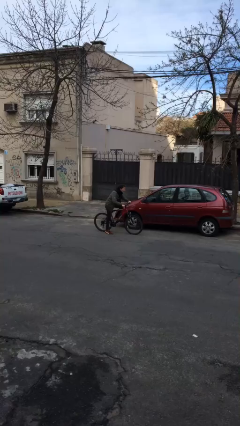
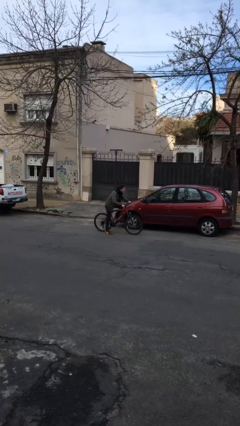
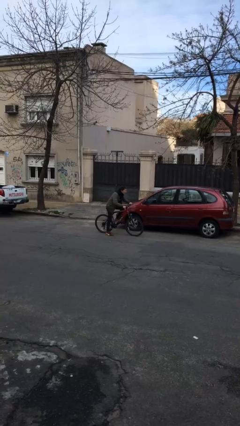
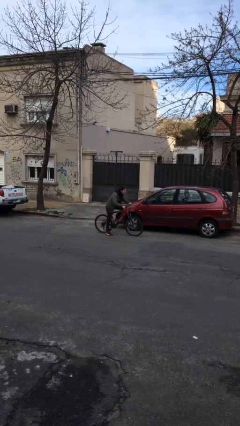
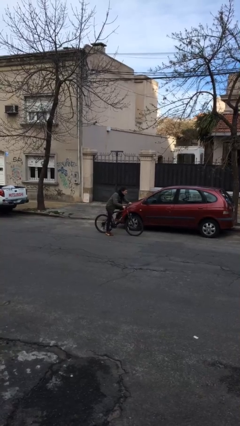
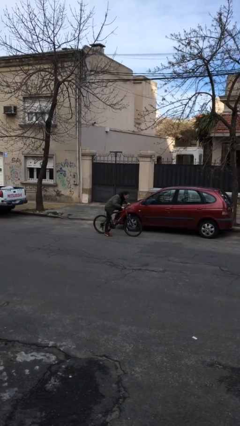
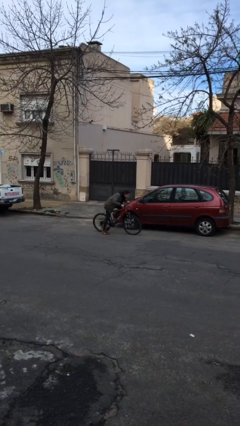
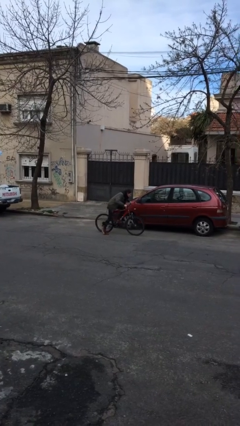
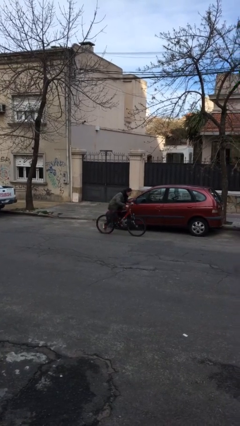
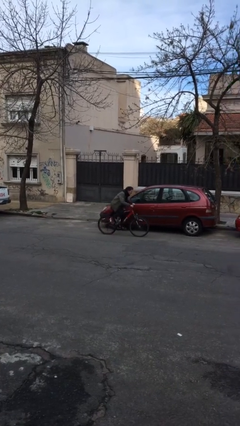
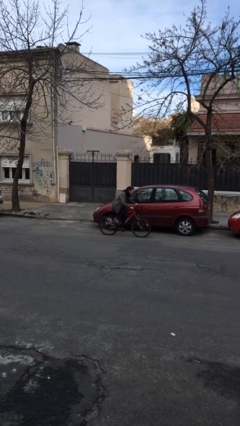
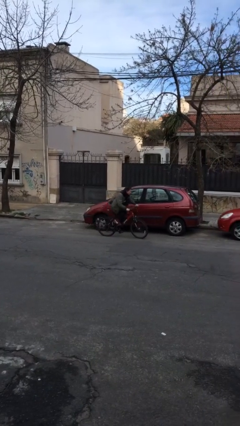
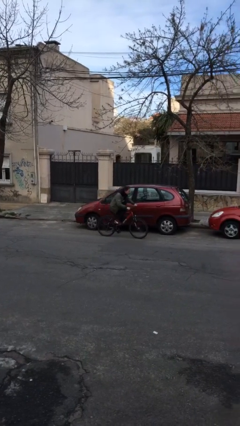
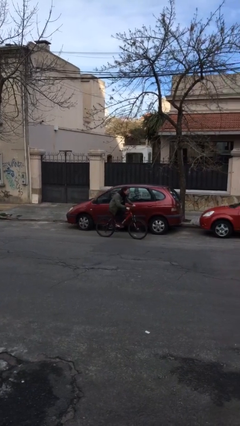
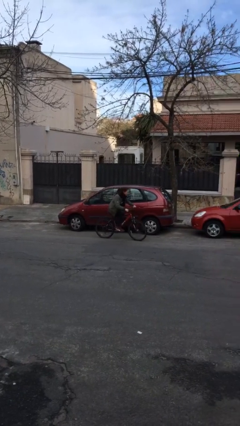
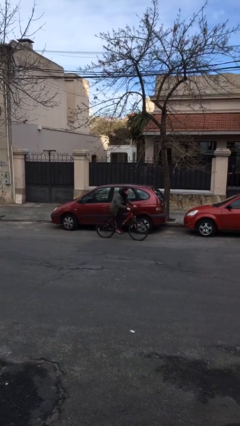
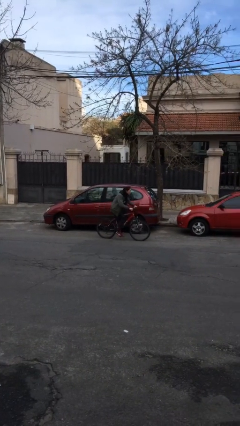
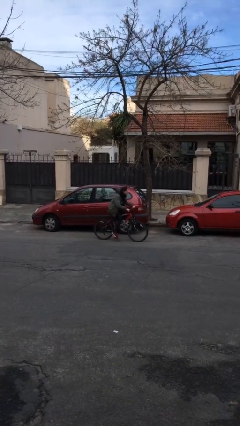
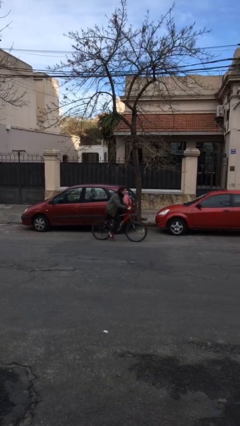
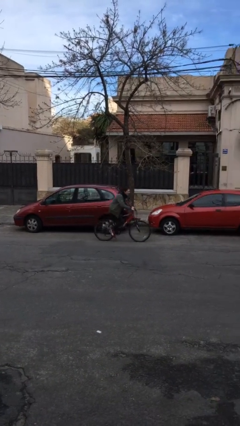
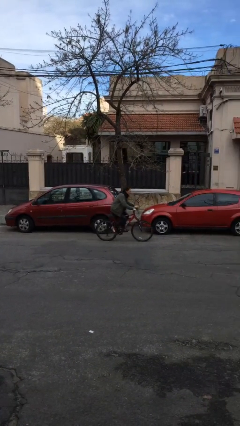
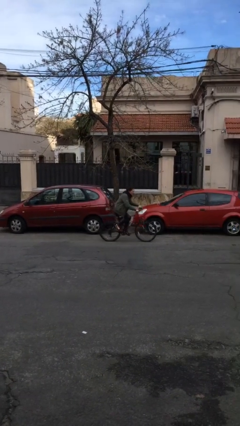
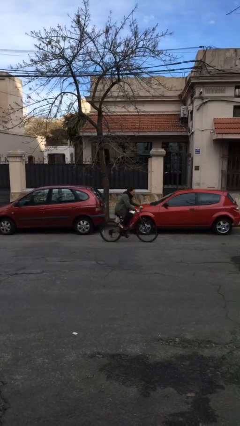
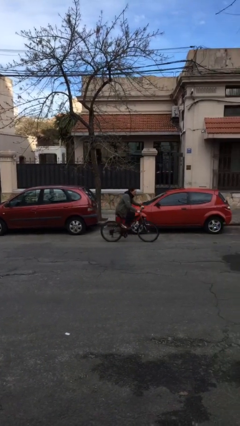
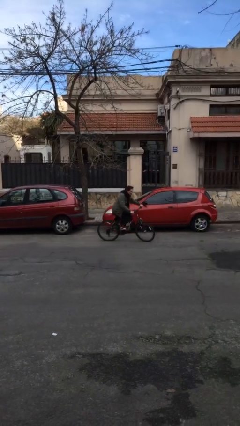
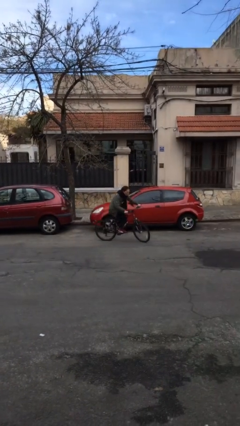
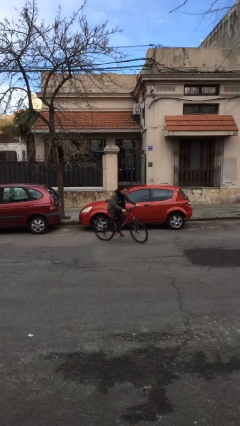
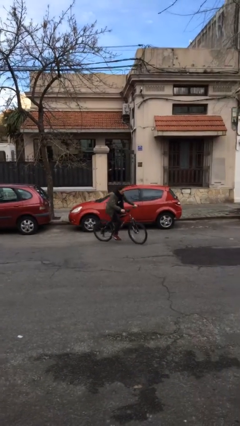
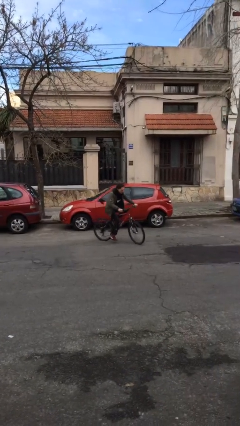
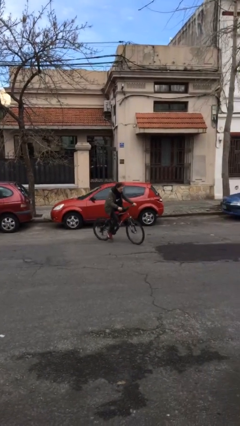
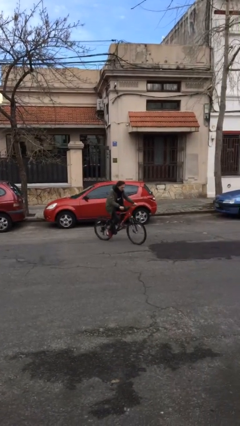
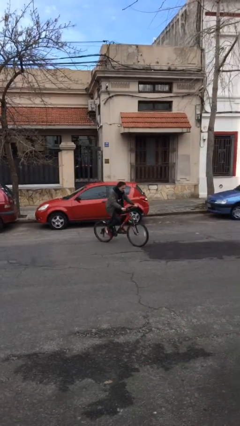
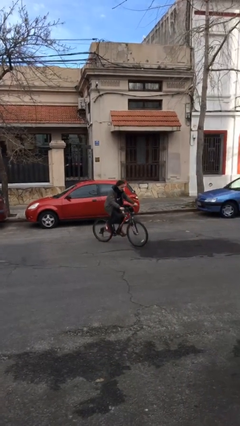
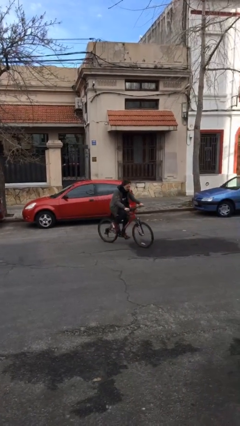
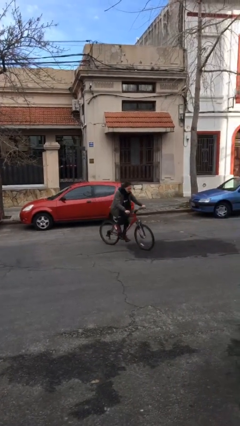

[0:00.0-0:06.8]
person rides bicycle

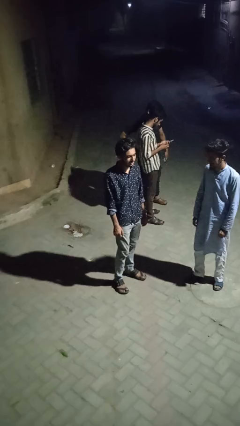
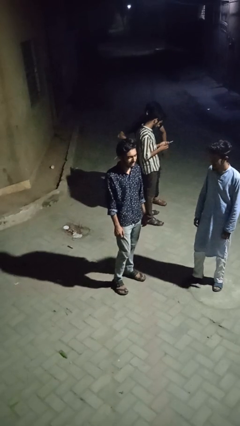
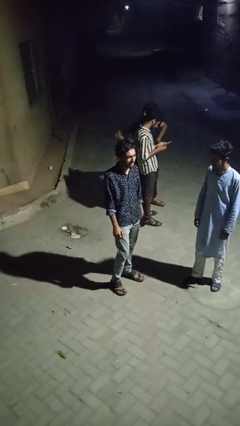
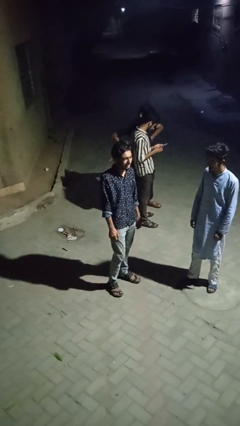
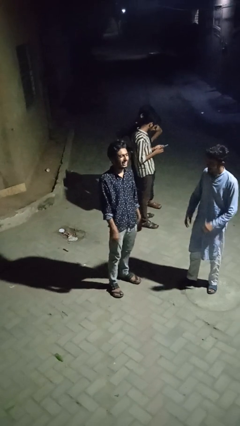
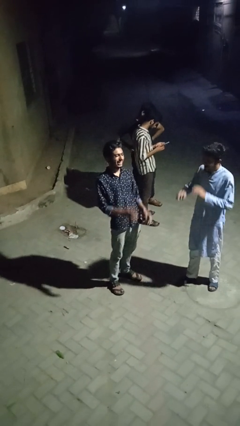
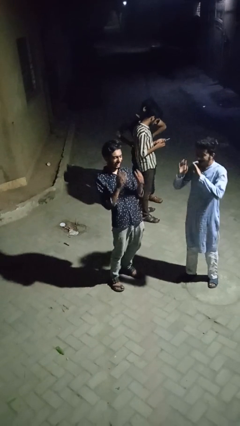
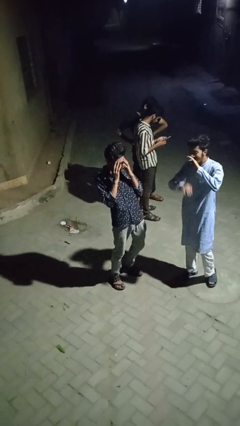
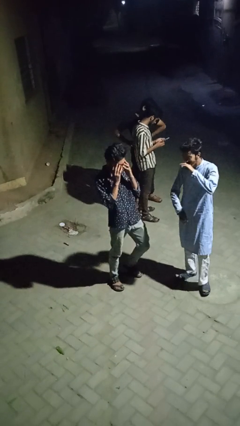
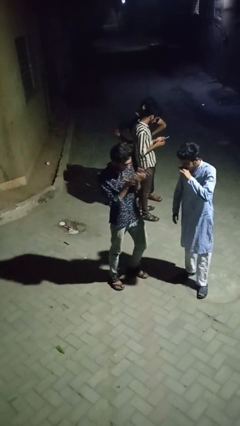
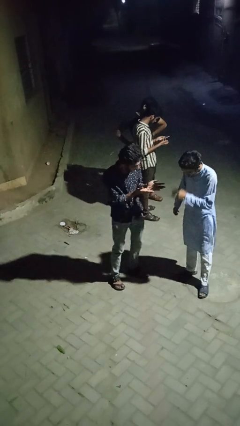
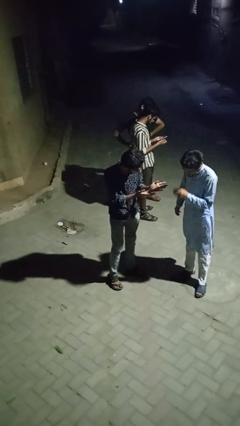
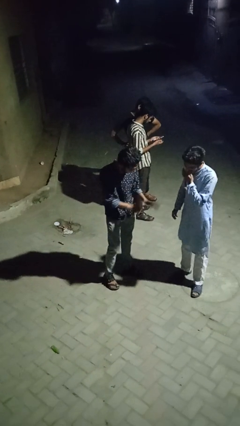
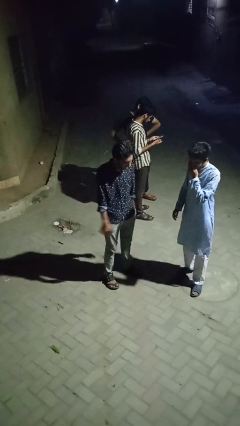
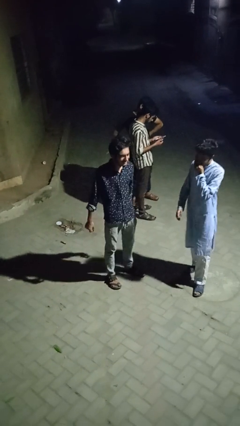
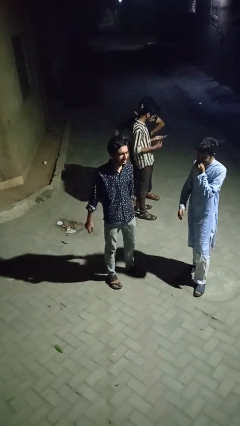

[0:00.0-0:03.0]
person laughs with person

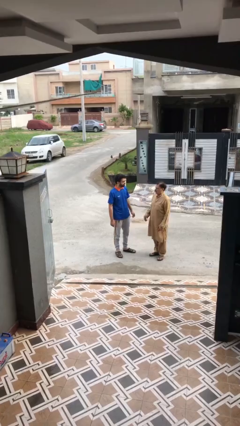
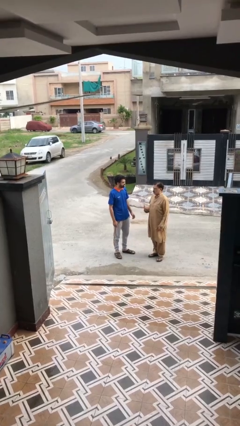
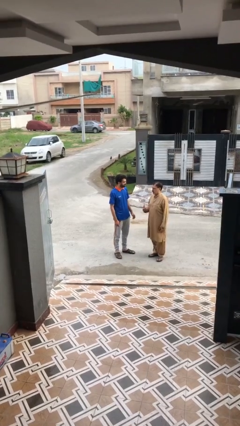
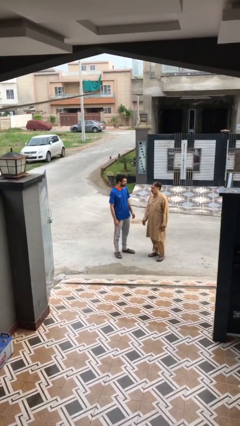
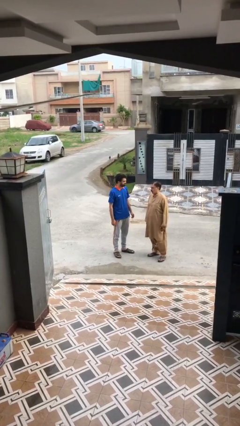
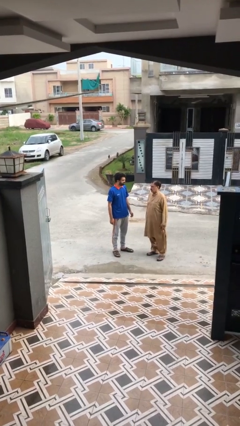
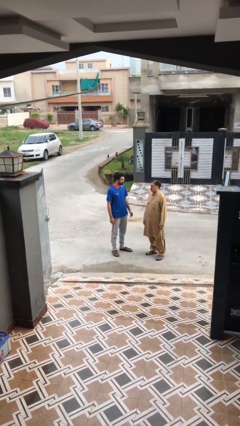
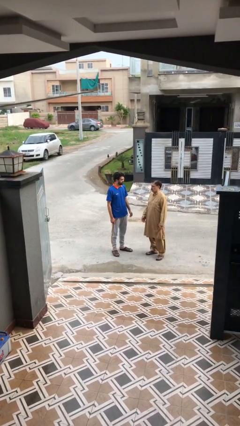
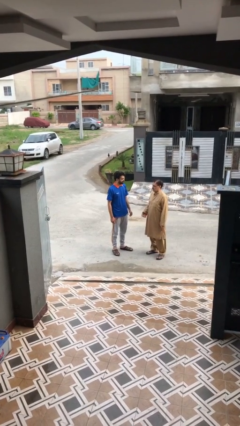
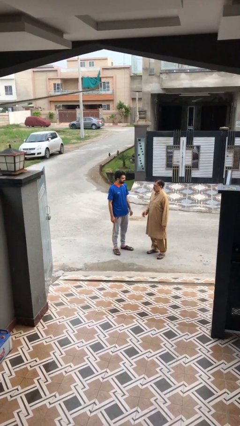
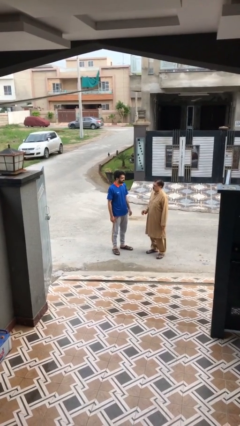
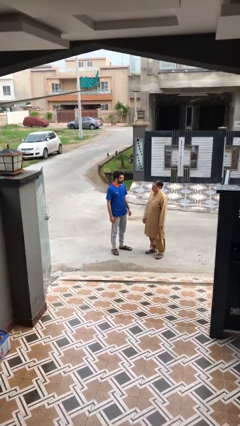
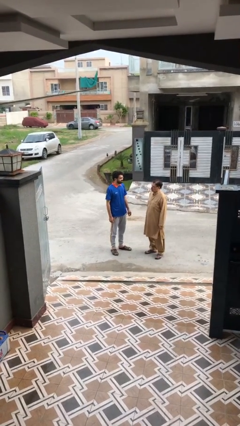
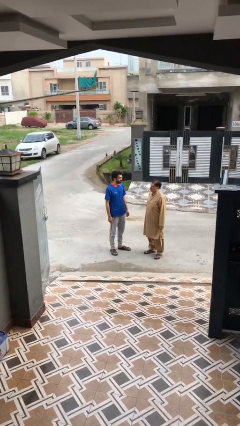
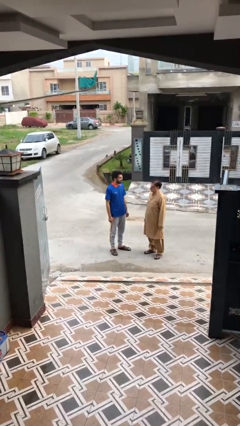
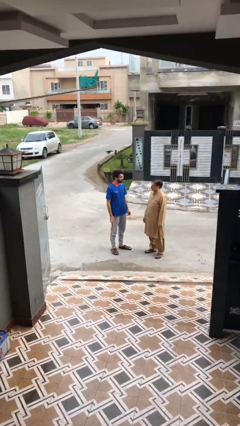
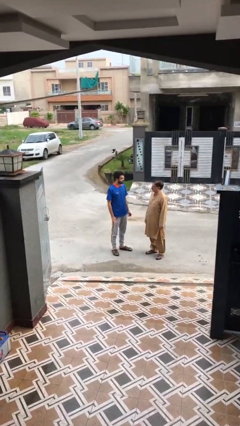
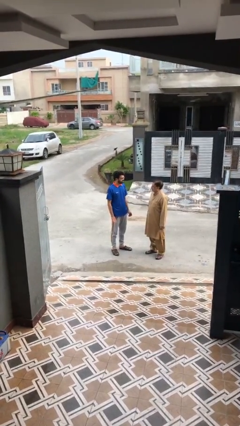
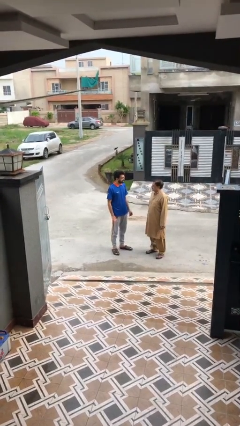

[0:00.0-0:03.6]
person talks to person

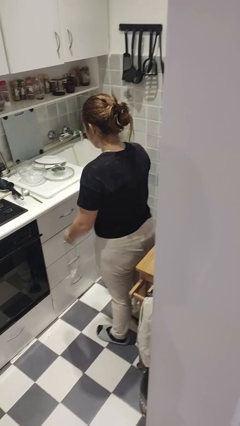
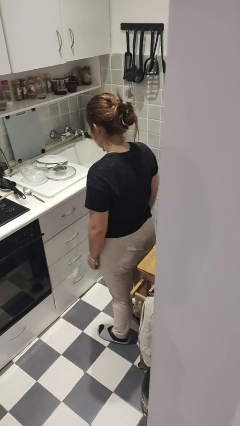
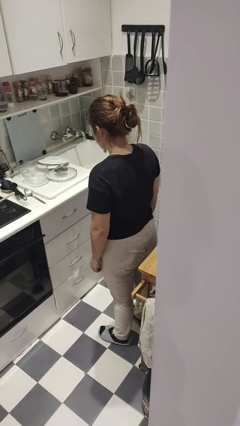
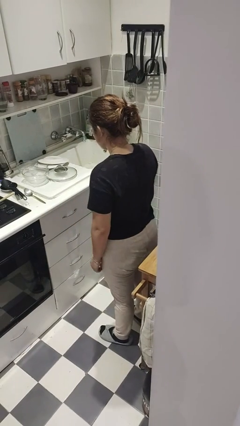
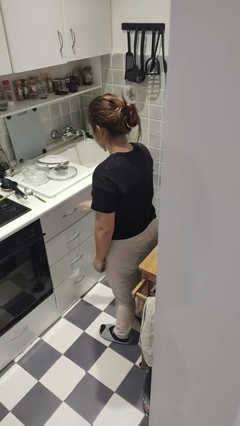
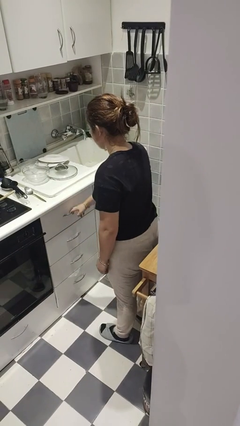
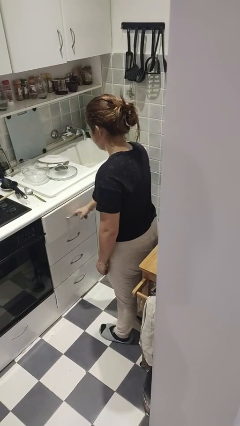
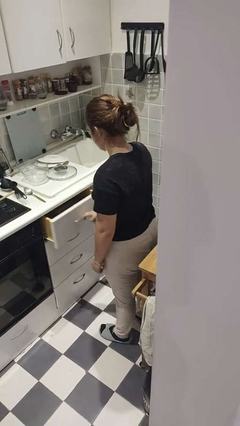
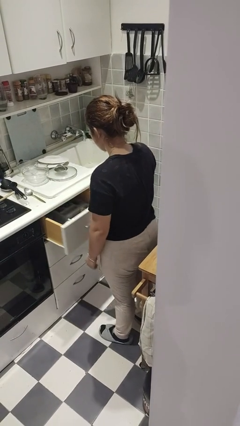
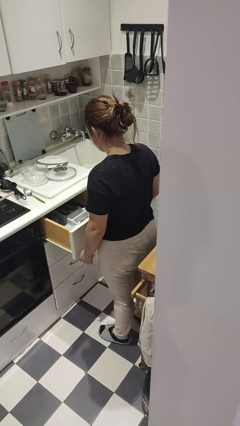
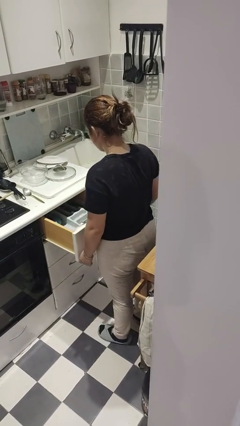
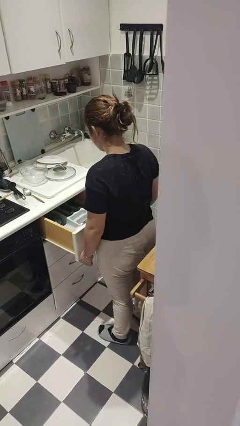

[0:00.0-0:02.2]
person opens kitchen drawer

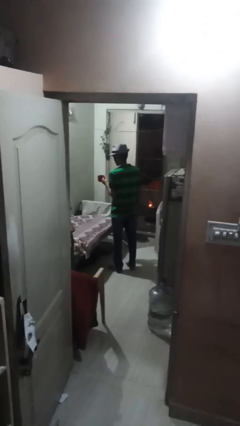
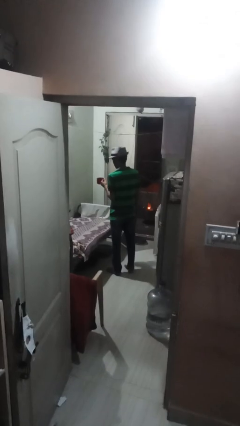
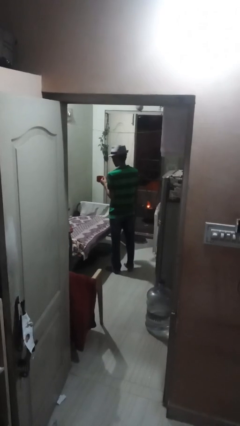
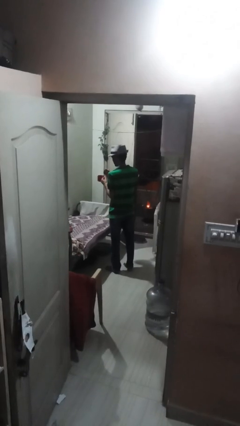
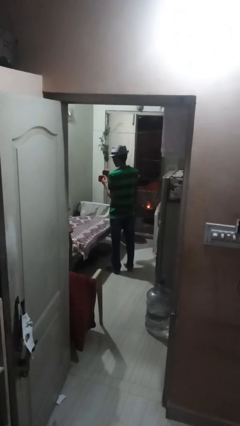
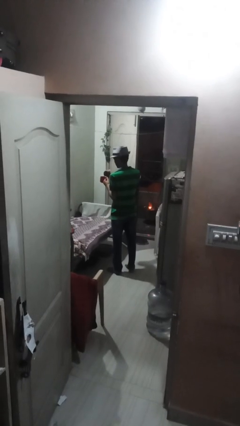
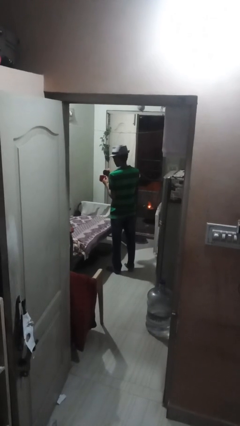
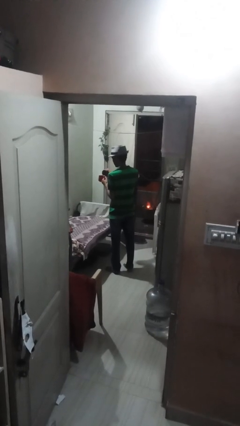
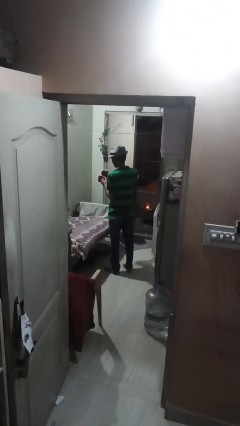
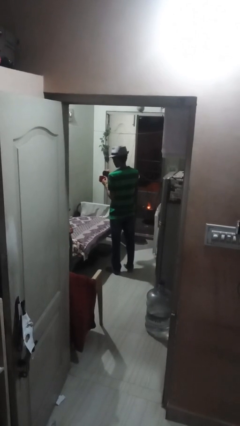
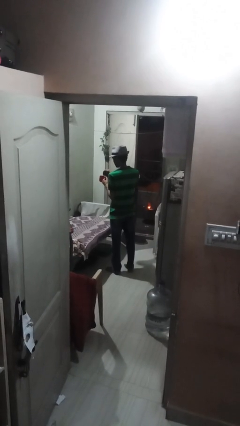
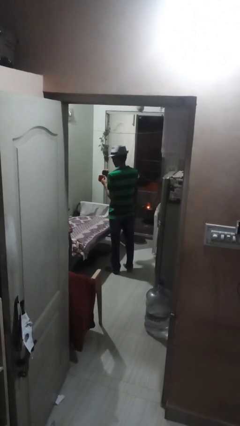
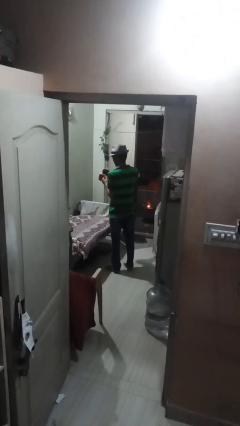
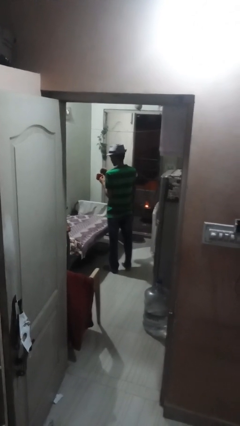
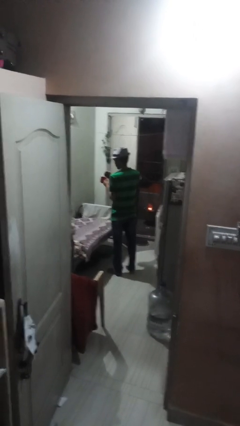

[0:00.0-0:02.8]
person pours coffee into mug
